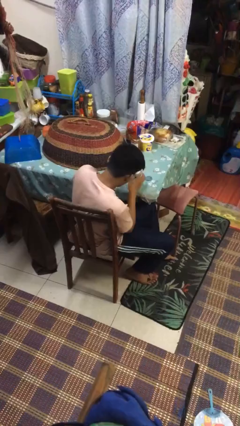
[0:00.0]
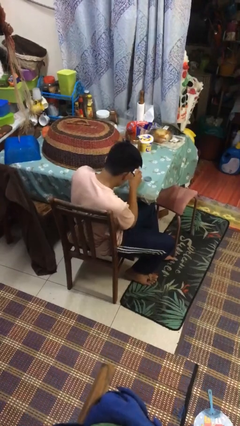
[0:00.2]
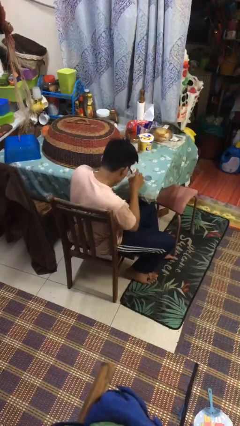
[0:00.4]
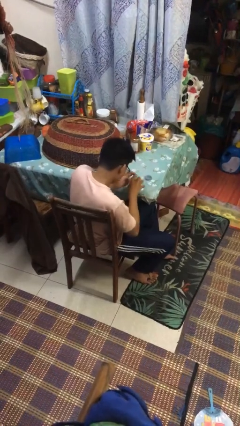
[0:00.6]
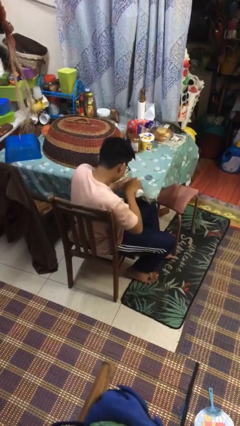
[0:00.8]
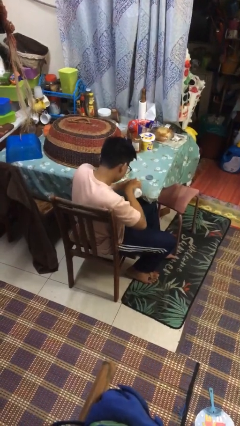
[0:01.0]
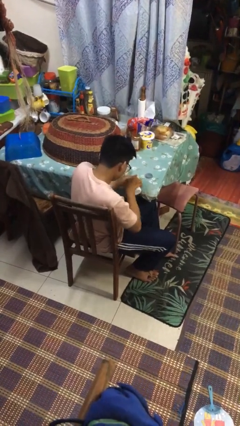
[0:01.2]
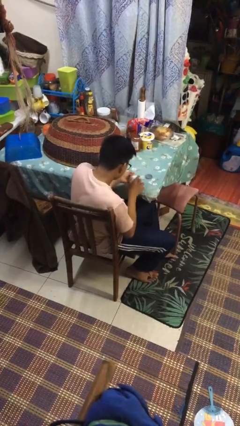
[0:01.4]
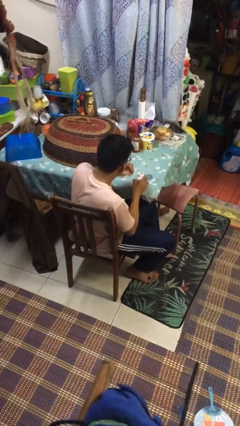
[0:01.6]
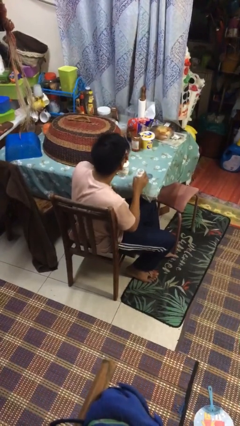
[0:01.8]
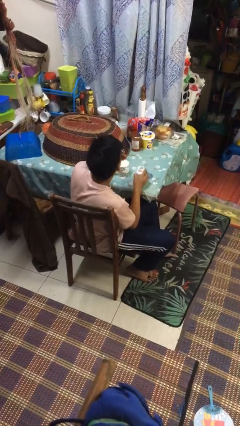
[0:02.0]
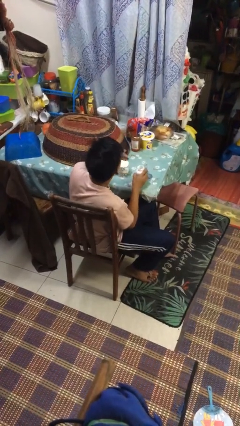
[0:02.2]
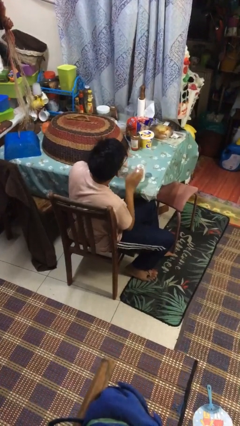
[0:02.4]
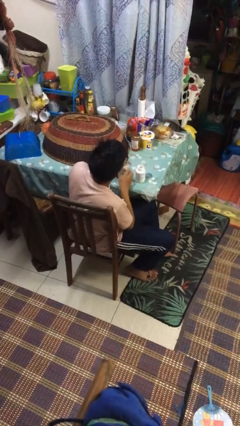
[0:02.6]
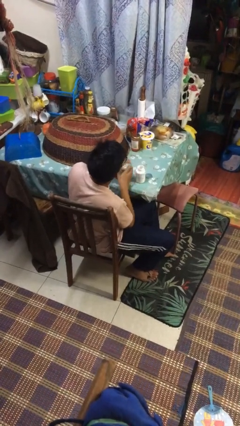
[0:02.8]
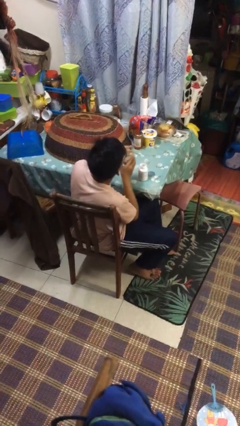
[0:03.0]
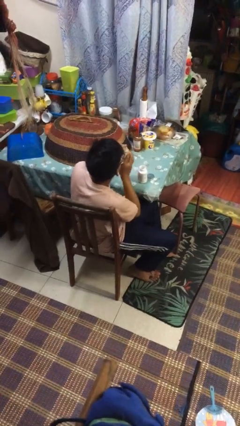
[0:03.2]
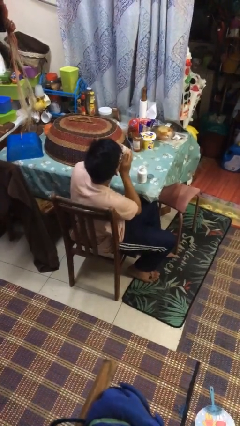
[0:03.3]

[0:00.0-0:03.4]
person takes medicine pills

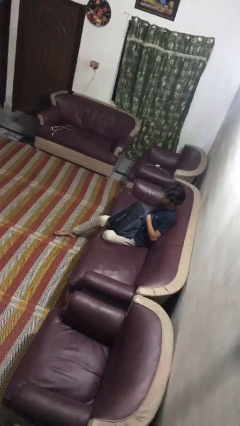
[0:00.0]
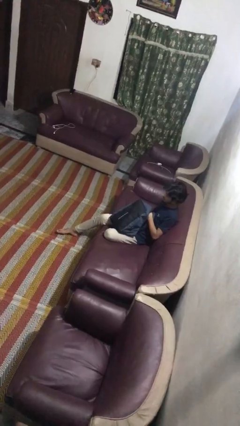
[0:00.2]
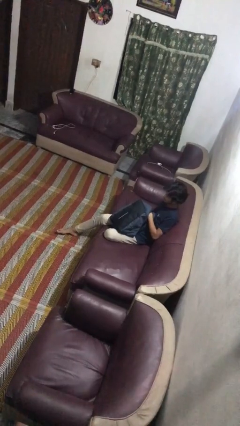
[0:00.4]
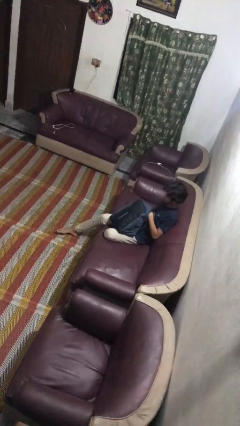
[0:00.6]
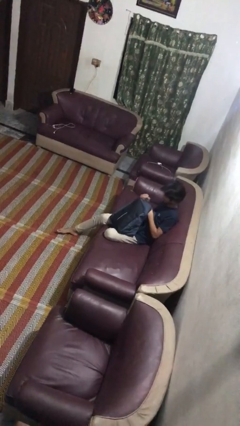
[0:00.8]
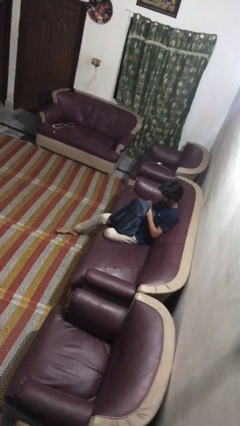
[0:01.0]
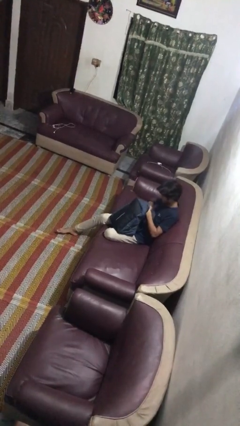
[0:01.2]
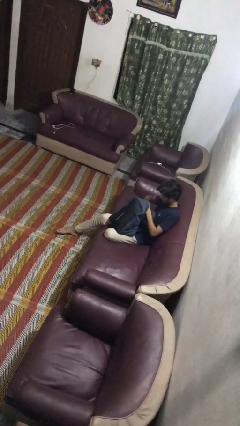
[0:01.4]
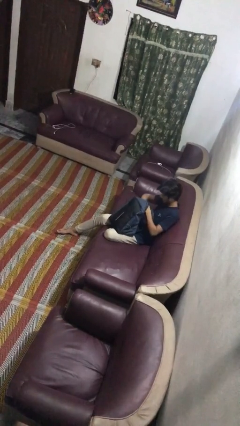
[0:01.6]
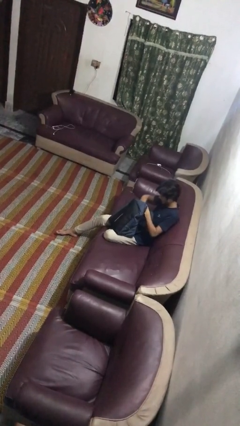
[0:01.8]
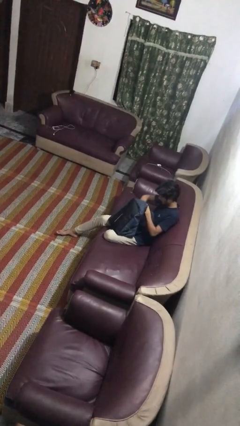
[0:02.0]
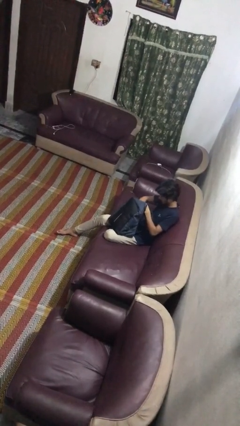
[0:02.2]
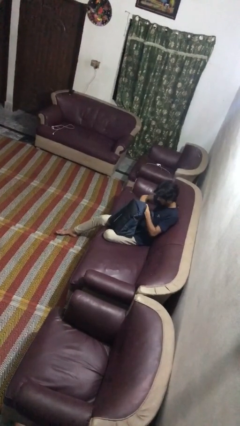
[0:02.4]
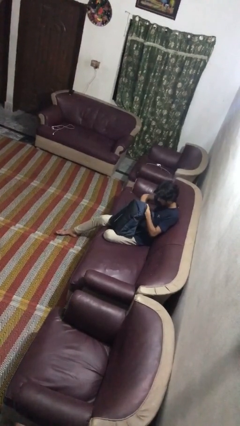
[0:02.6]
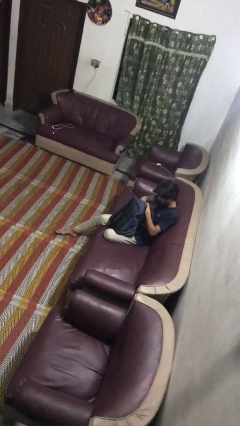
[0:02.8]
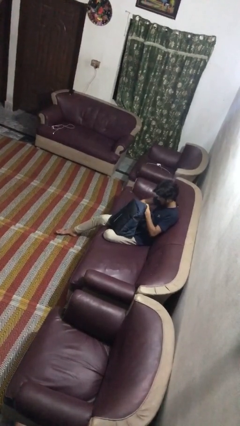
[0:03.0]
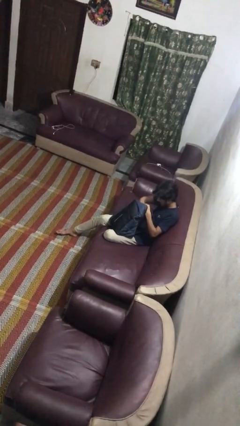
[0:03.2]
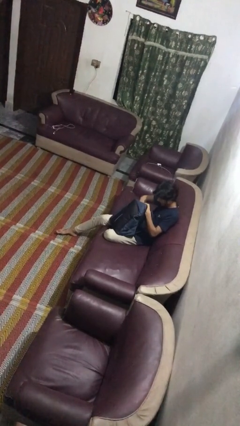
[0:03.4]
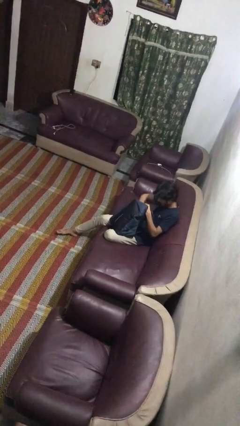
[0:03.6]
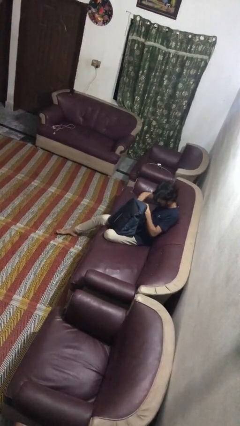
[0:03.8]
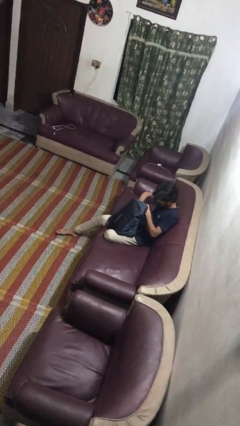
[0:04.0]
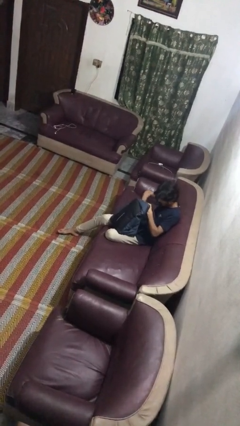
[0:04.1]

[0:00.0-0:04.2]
person searches in backpack

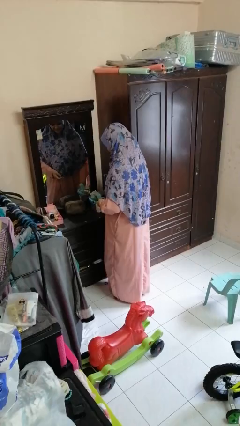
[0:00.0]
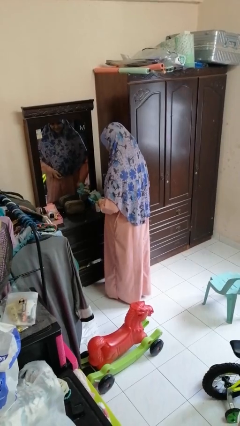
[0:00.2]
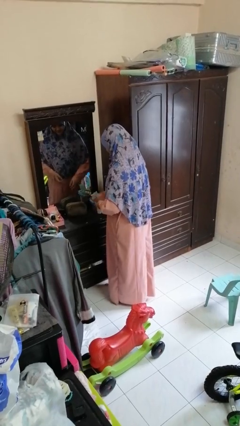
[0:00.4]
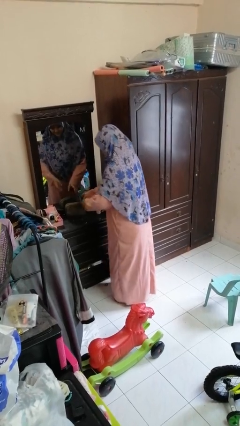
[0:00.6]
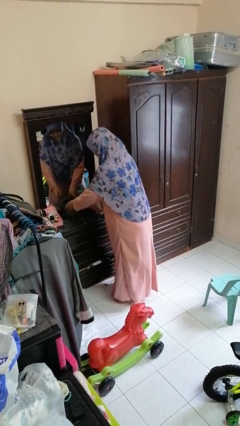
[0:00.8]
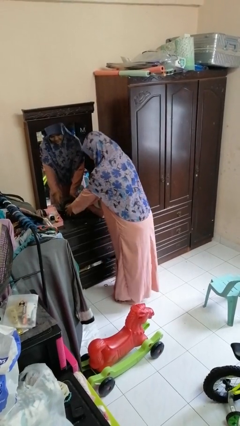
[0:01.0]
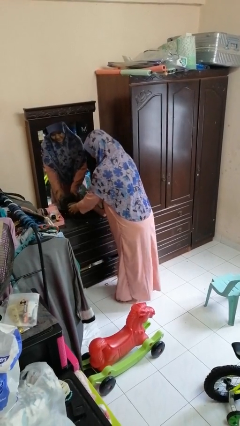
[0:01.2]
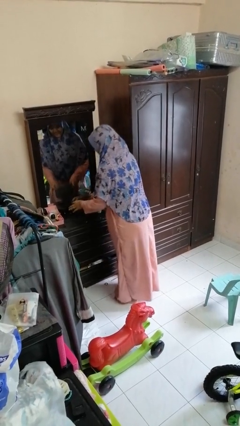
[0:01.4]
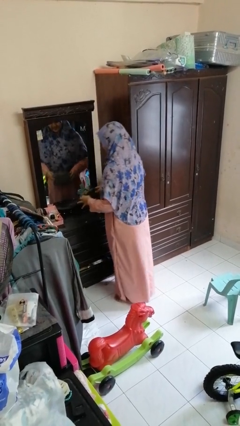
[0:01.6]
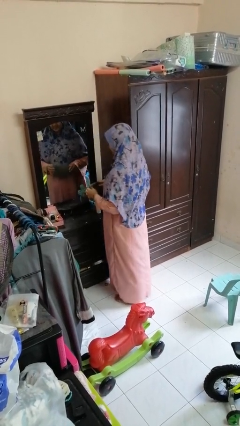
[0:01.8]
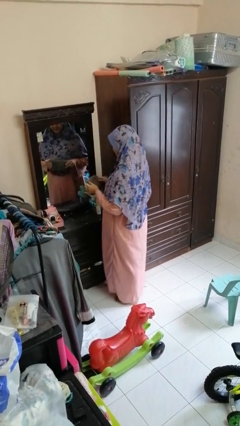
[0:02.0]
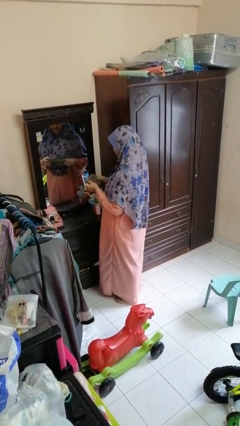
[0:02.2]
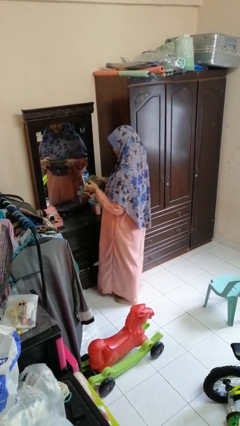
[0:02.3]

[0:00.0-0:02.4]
person picks up object from countertop

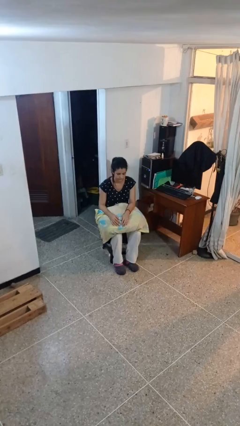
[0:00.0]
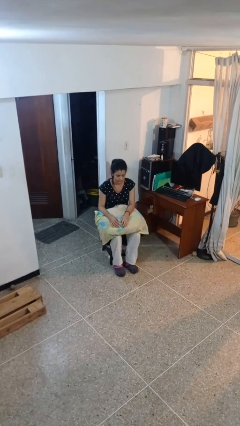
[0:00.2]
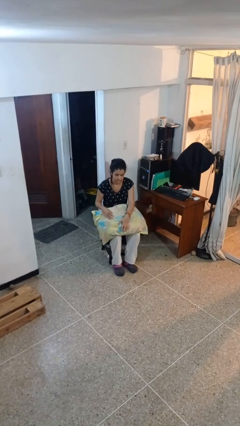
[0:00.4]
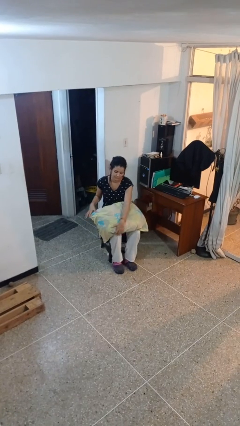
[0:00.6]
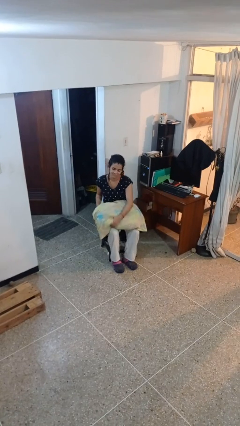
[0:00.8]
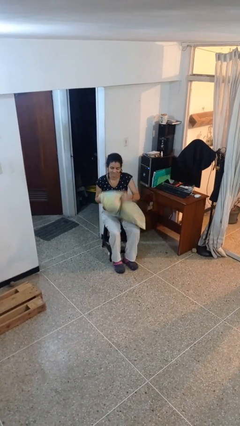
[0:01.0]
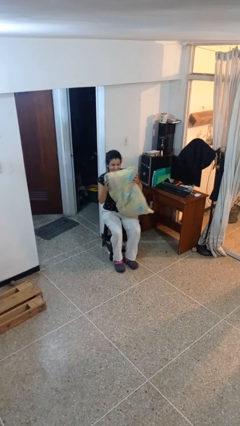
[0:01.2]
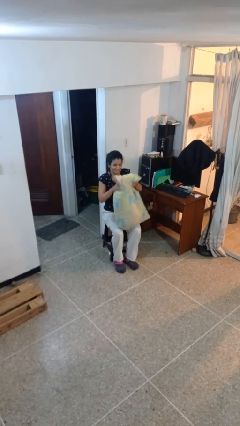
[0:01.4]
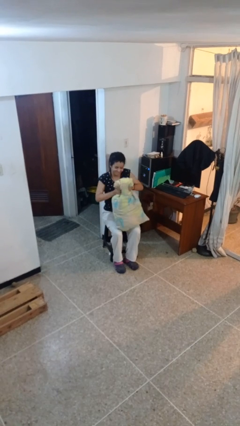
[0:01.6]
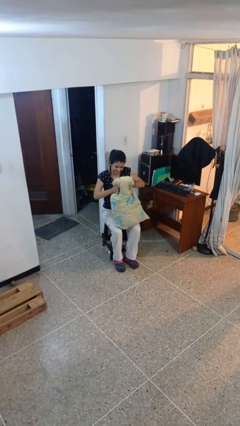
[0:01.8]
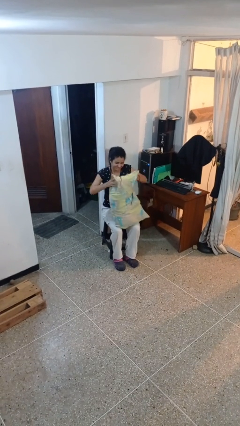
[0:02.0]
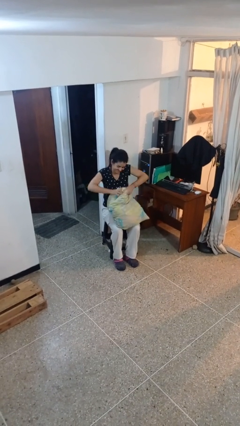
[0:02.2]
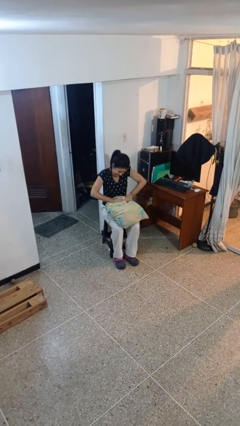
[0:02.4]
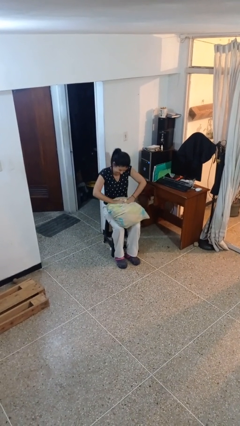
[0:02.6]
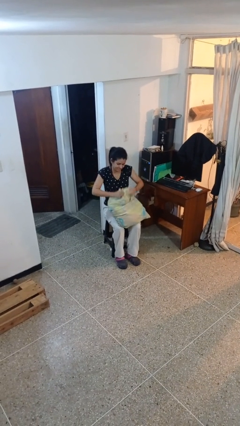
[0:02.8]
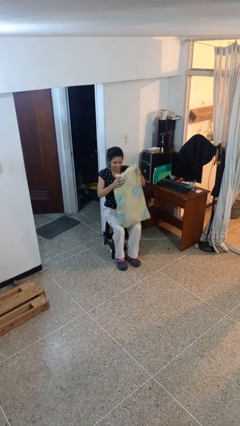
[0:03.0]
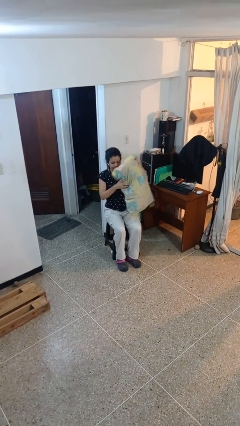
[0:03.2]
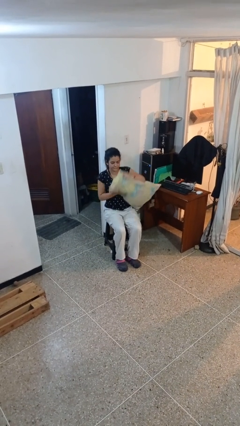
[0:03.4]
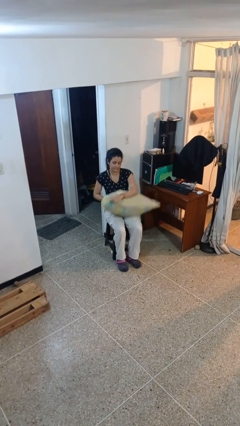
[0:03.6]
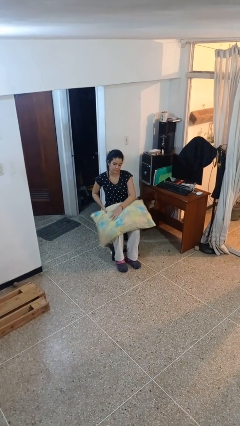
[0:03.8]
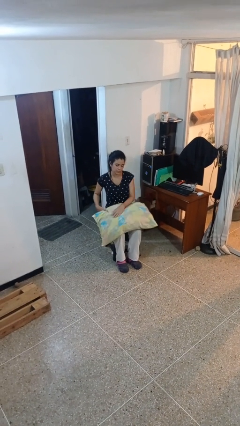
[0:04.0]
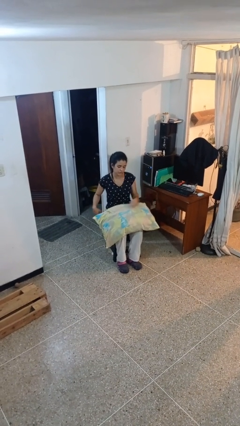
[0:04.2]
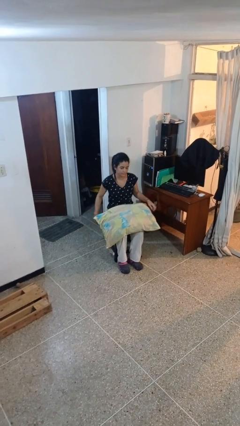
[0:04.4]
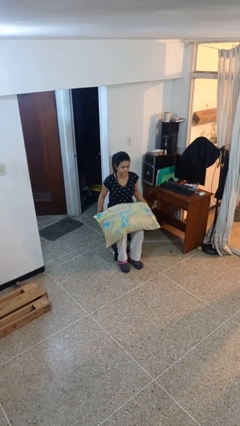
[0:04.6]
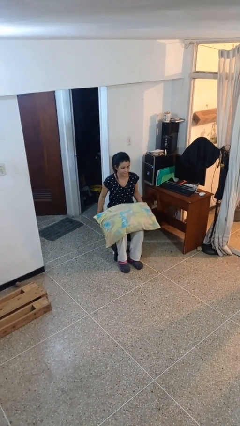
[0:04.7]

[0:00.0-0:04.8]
person squeezes object

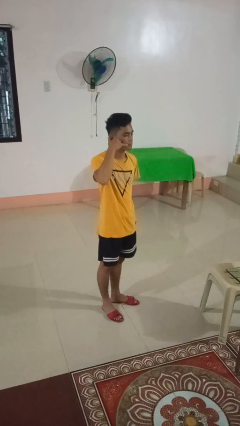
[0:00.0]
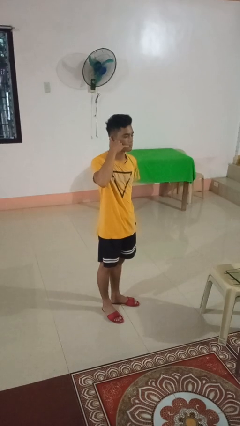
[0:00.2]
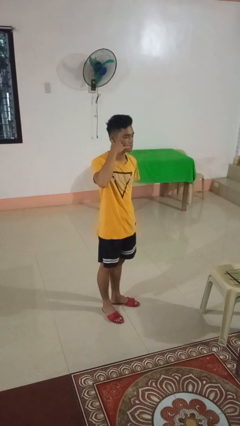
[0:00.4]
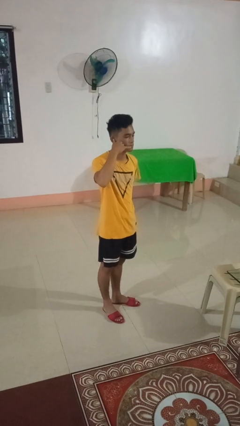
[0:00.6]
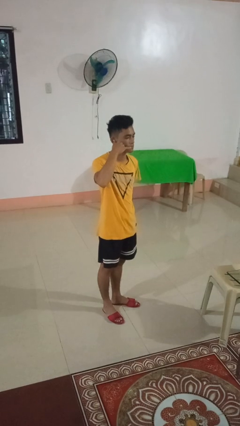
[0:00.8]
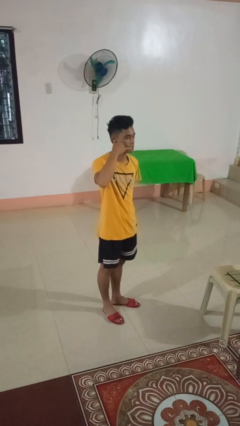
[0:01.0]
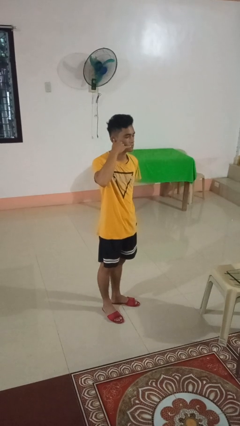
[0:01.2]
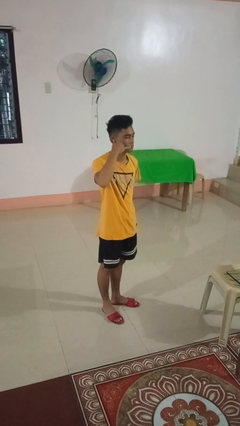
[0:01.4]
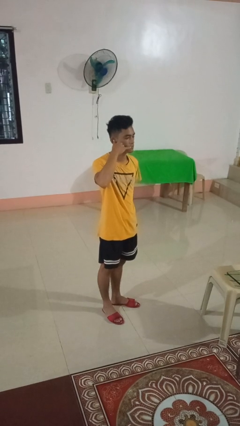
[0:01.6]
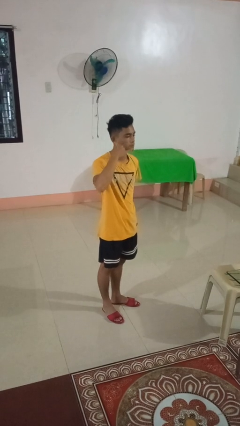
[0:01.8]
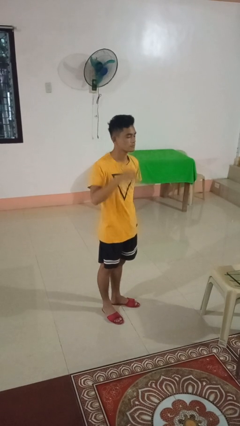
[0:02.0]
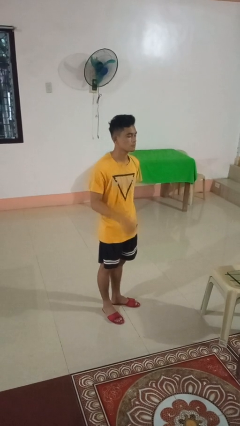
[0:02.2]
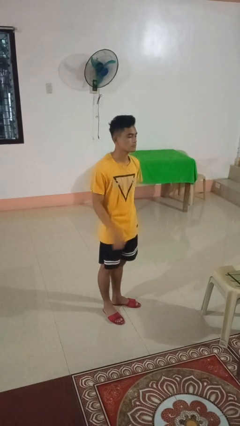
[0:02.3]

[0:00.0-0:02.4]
person gestures call me

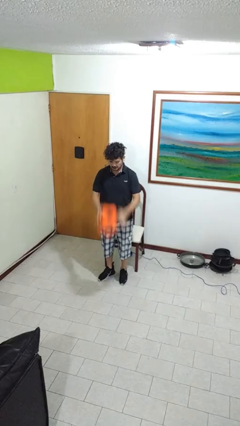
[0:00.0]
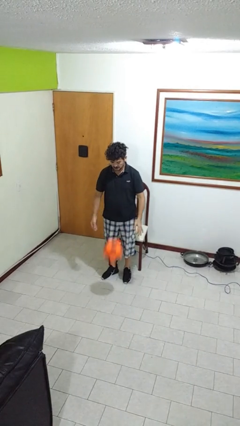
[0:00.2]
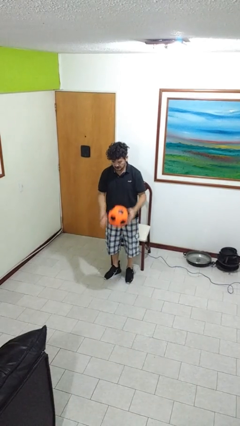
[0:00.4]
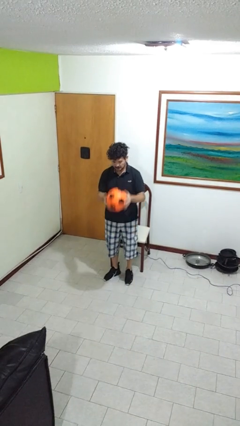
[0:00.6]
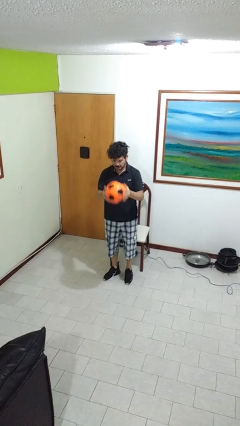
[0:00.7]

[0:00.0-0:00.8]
person bounces ball on floor
